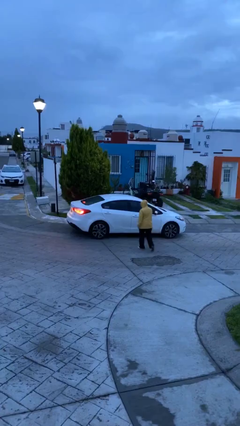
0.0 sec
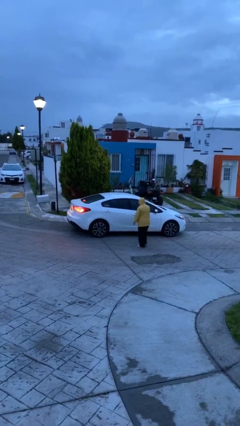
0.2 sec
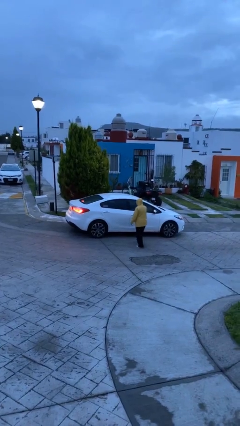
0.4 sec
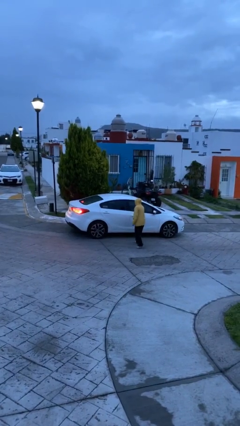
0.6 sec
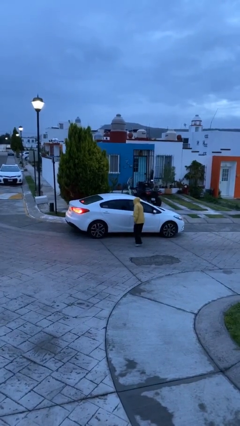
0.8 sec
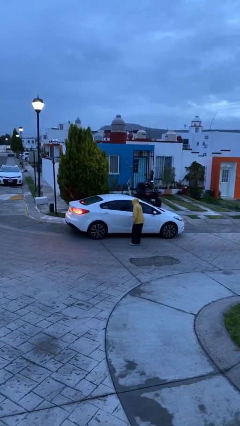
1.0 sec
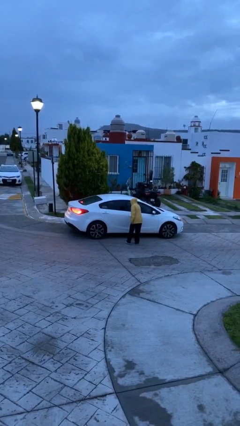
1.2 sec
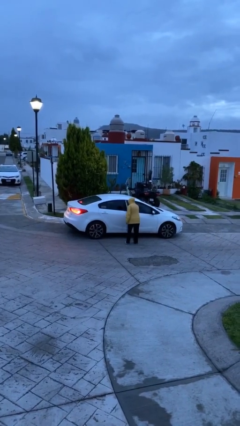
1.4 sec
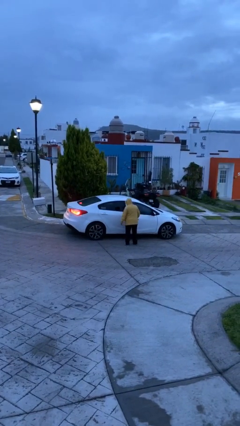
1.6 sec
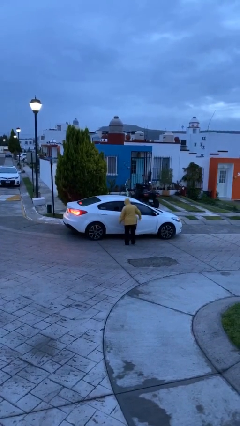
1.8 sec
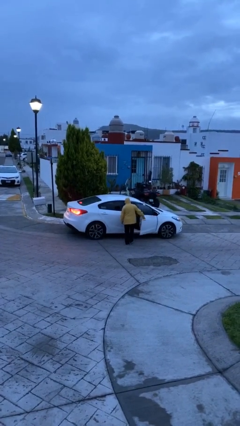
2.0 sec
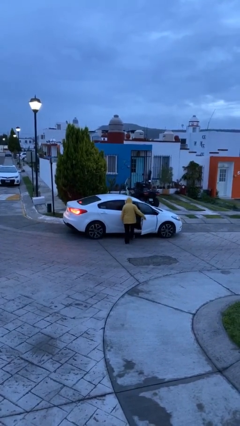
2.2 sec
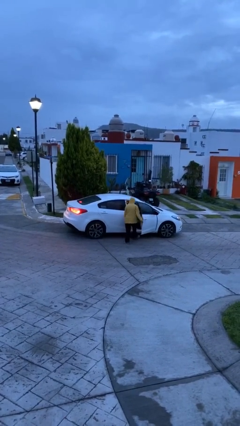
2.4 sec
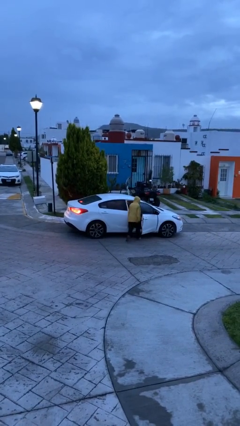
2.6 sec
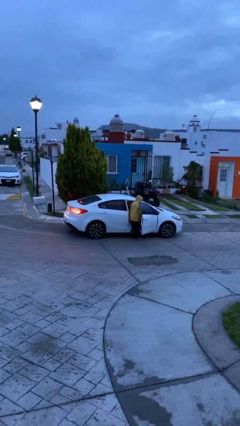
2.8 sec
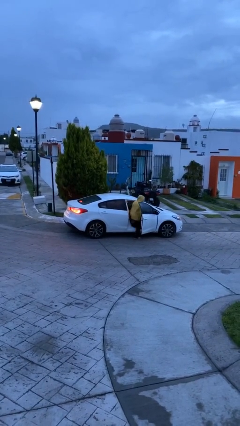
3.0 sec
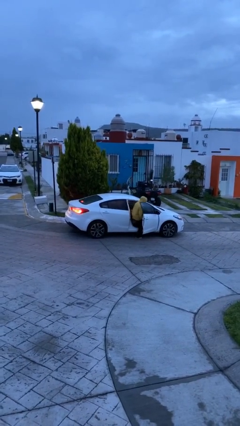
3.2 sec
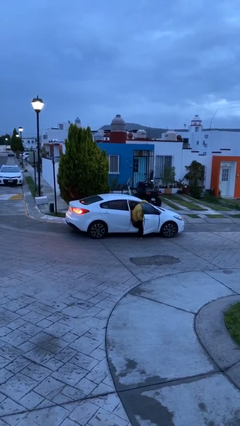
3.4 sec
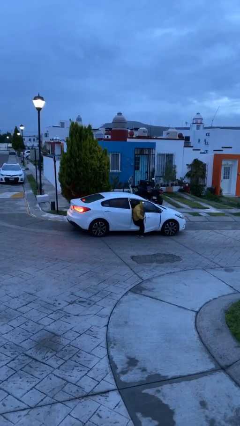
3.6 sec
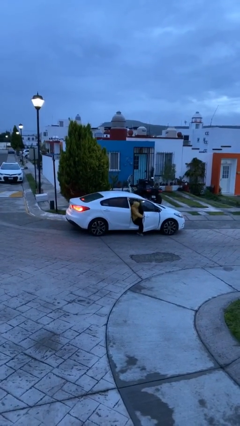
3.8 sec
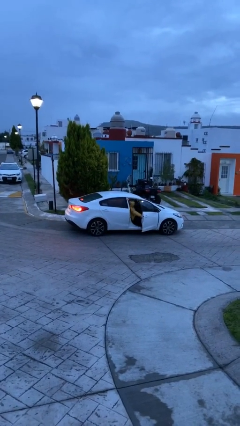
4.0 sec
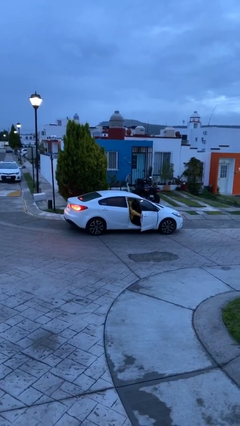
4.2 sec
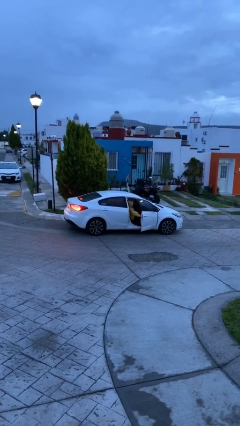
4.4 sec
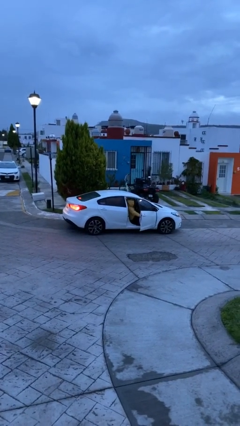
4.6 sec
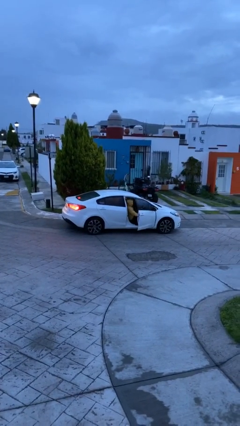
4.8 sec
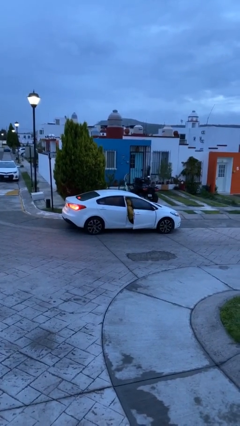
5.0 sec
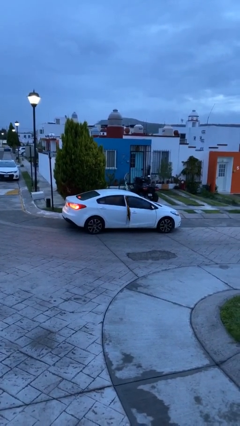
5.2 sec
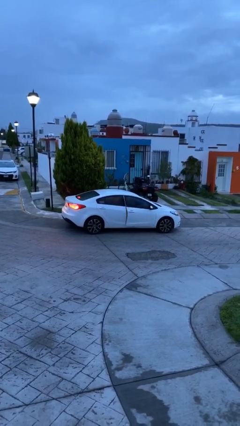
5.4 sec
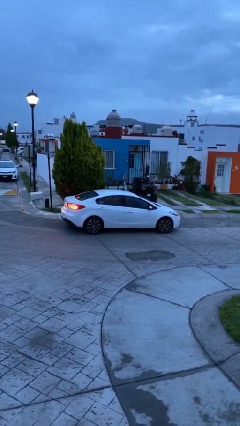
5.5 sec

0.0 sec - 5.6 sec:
car picks up person
